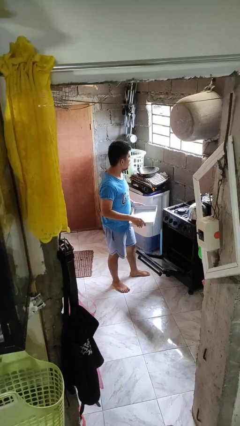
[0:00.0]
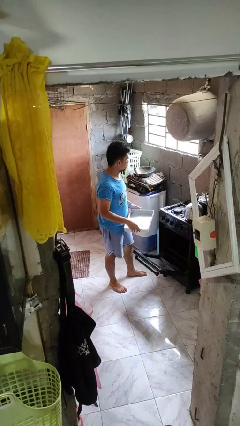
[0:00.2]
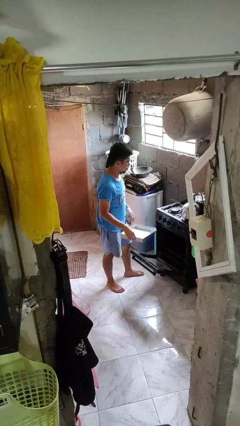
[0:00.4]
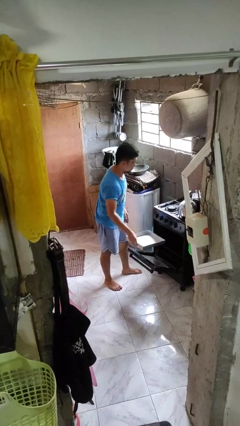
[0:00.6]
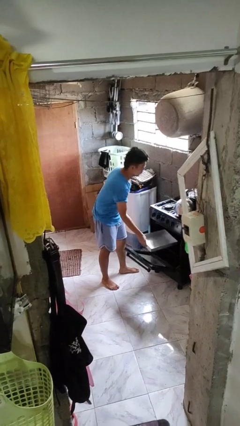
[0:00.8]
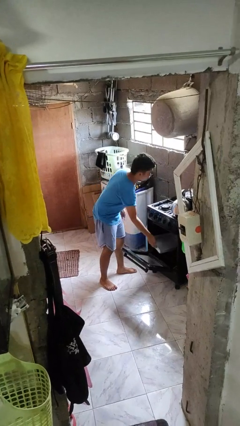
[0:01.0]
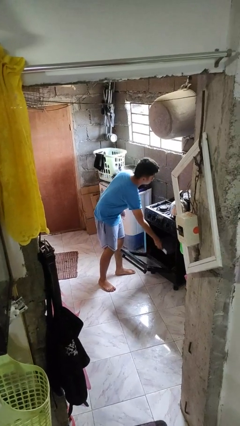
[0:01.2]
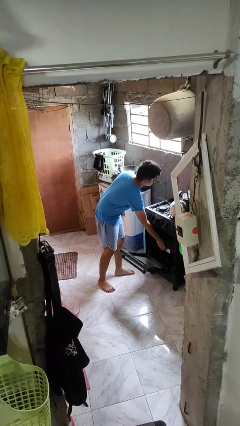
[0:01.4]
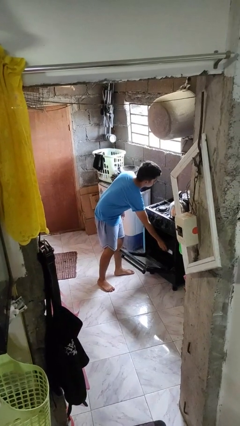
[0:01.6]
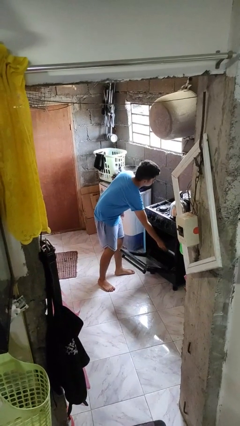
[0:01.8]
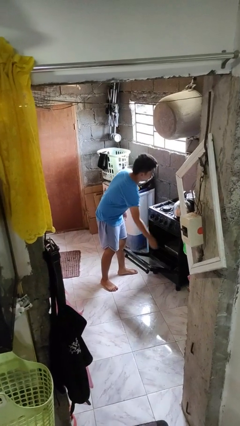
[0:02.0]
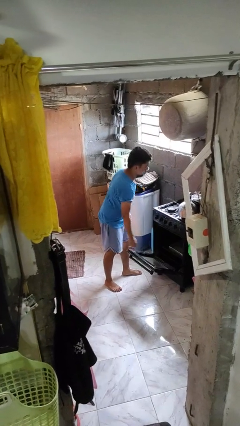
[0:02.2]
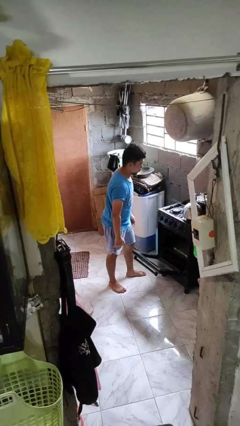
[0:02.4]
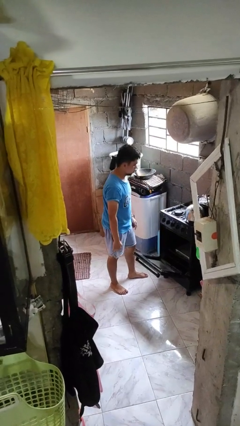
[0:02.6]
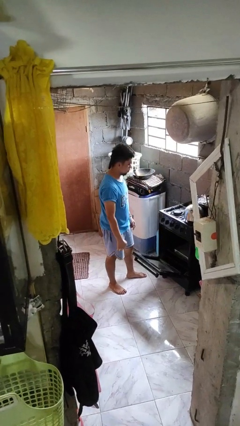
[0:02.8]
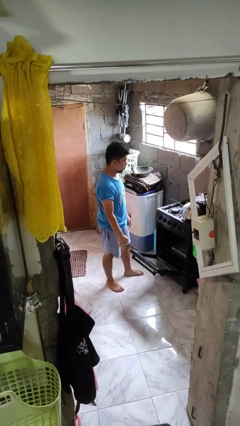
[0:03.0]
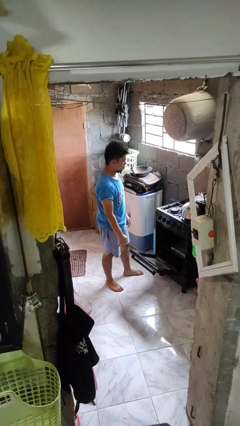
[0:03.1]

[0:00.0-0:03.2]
person puts object into oven

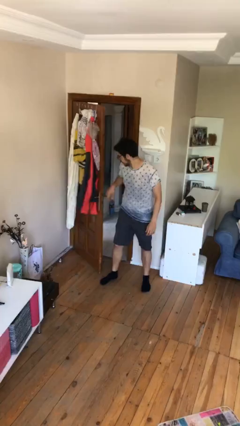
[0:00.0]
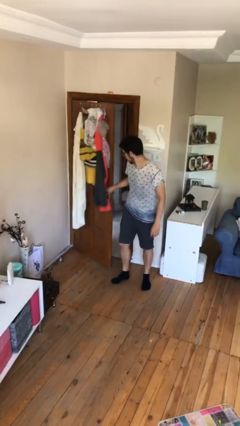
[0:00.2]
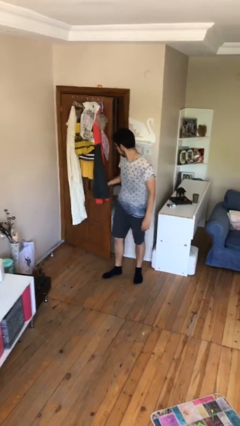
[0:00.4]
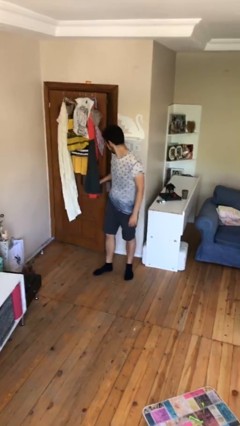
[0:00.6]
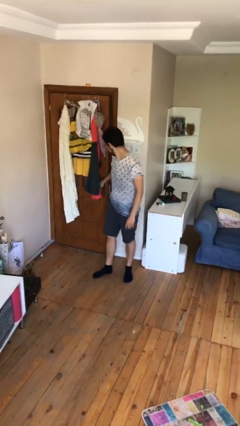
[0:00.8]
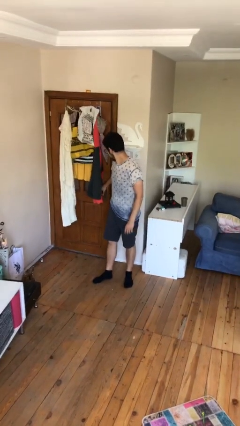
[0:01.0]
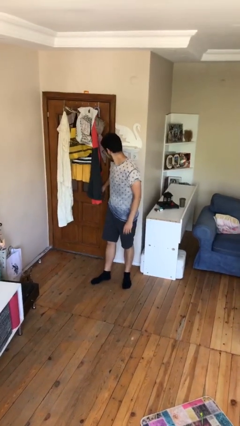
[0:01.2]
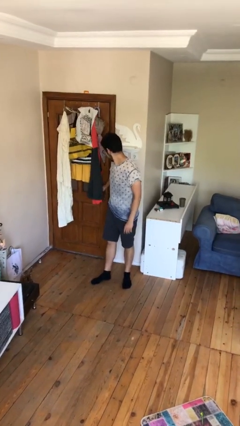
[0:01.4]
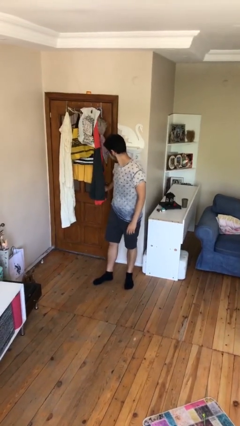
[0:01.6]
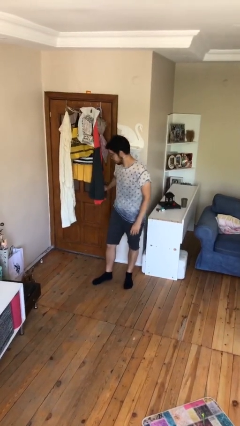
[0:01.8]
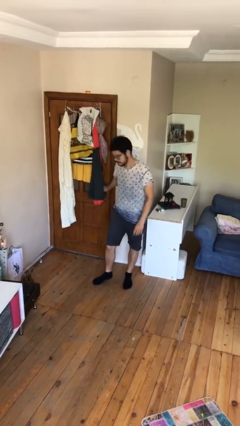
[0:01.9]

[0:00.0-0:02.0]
person closes facility door

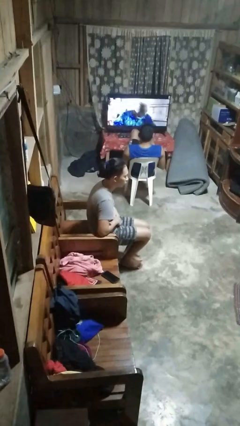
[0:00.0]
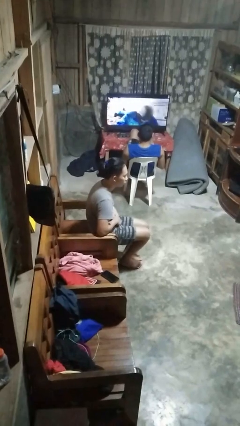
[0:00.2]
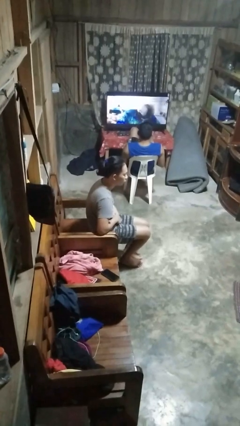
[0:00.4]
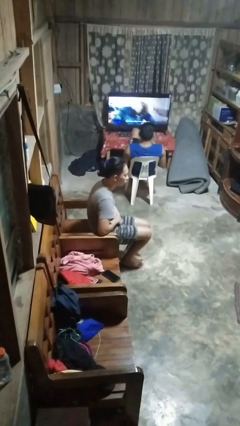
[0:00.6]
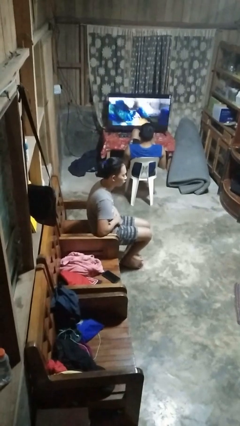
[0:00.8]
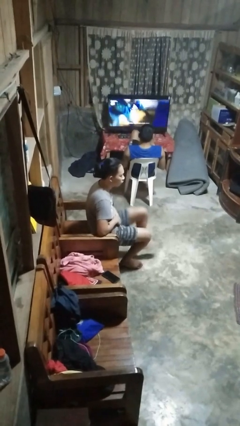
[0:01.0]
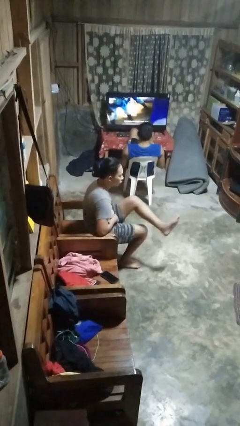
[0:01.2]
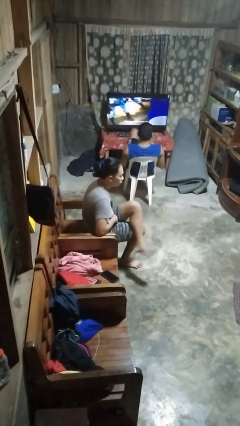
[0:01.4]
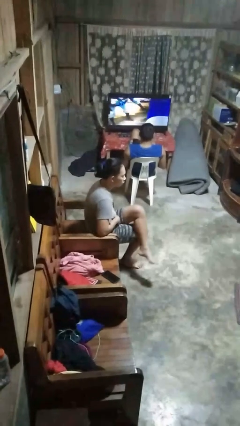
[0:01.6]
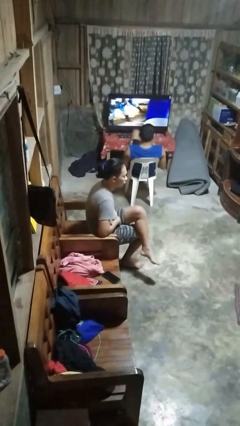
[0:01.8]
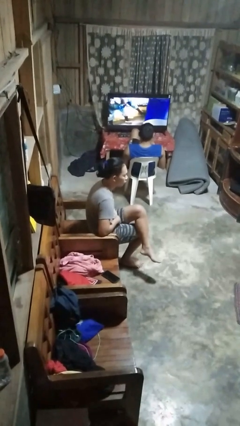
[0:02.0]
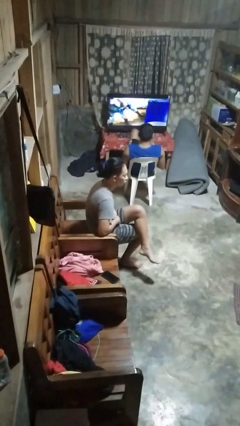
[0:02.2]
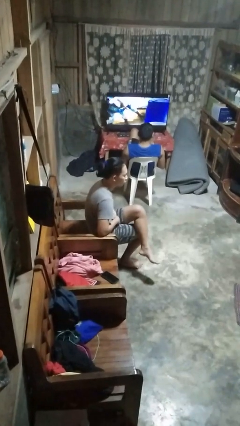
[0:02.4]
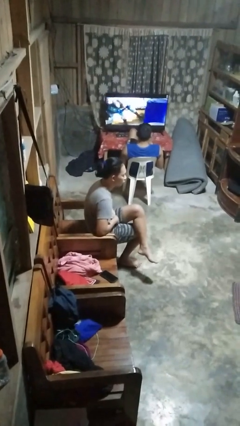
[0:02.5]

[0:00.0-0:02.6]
person crosses legs

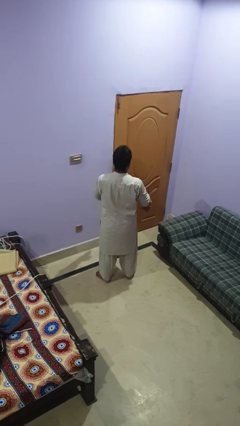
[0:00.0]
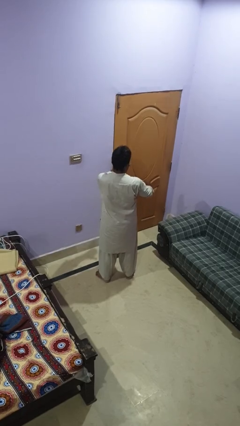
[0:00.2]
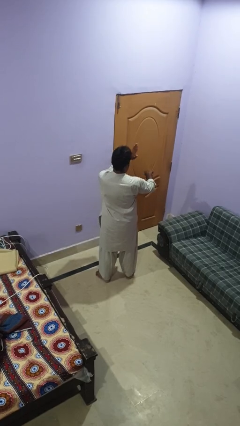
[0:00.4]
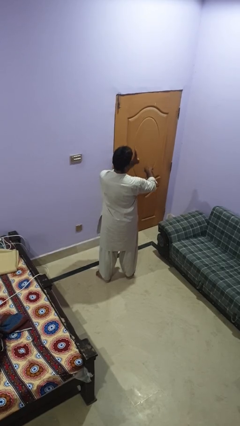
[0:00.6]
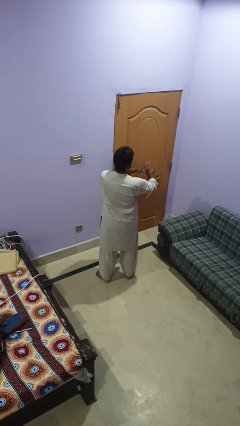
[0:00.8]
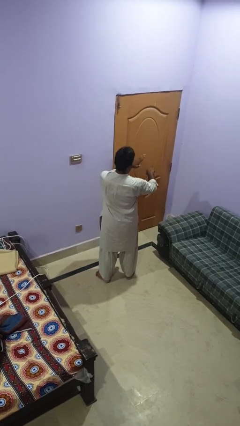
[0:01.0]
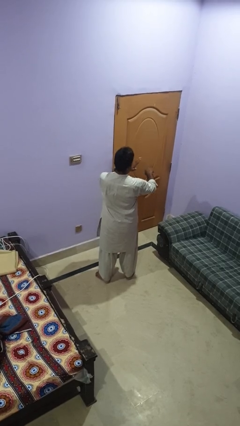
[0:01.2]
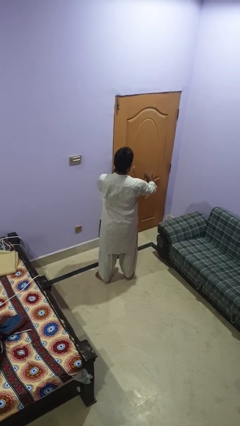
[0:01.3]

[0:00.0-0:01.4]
person swats bug

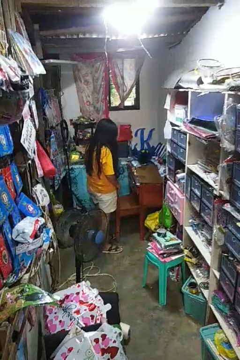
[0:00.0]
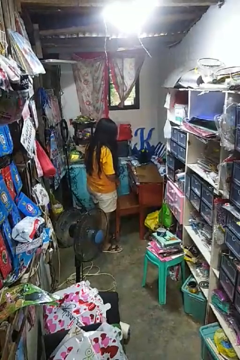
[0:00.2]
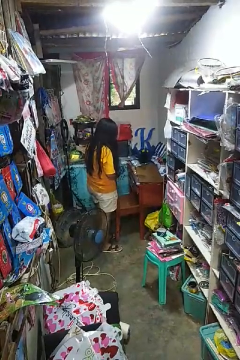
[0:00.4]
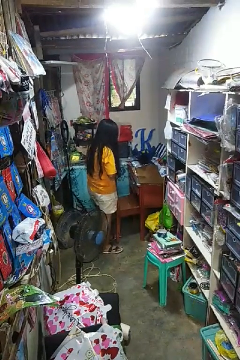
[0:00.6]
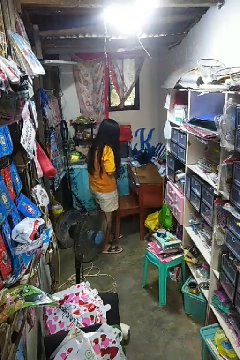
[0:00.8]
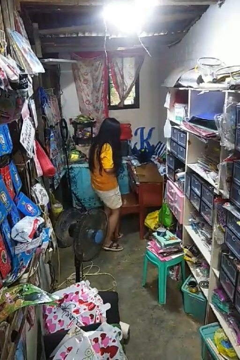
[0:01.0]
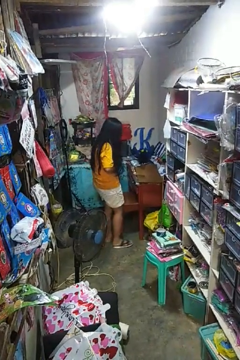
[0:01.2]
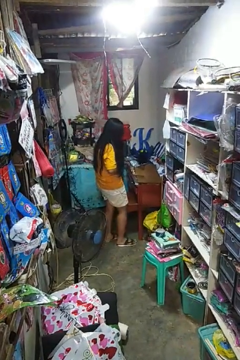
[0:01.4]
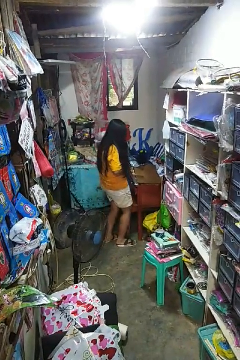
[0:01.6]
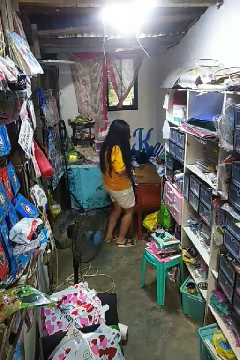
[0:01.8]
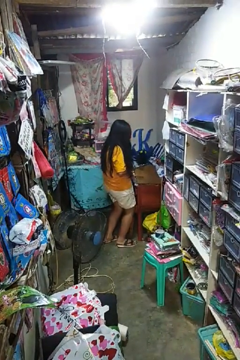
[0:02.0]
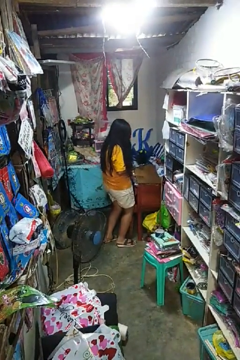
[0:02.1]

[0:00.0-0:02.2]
person pushes in chair

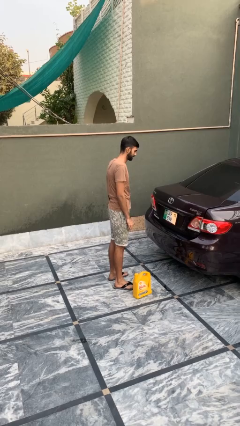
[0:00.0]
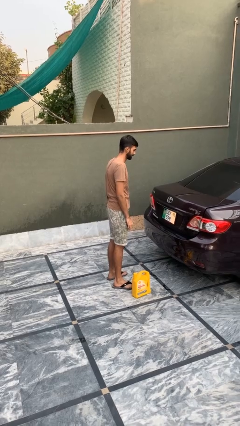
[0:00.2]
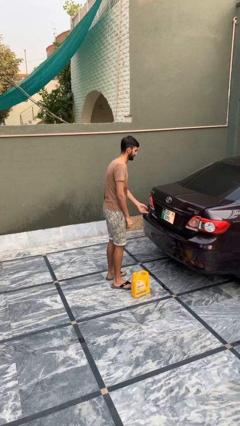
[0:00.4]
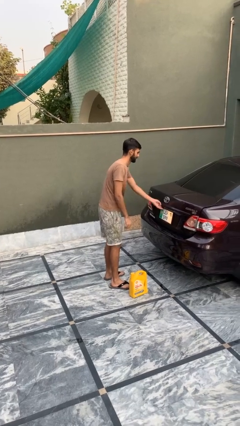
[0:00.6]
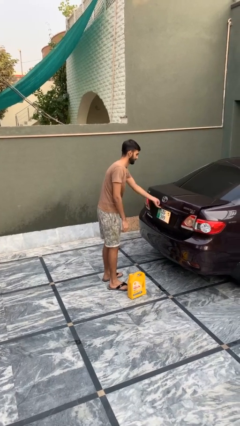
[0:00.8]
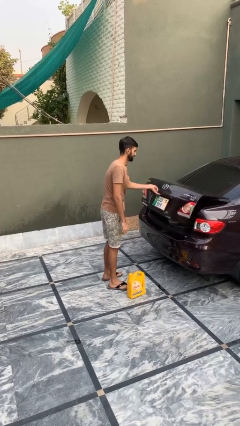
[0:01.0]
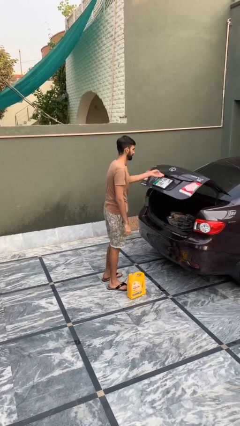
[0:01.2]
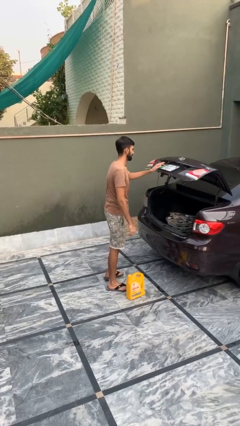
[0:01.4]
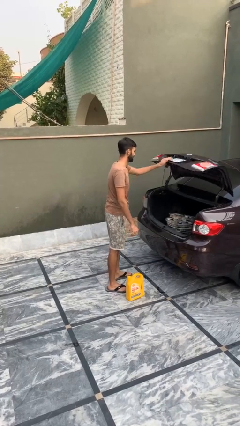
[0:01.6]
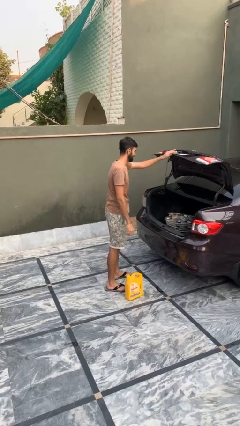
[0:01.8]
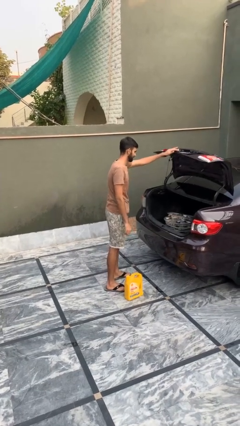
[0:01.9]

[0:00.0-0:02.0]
person opens car trunk

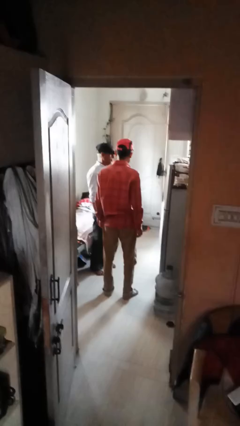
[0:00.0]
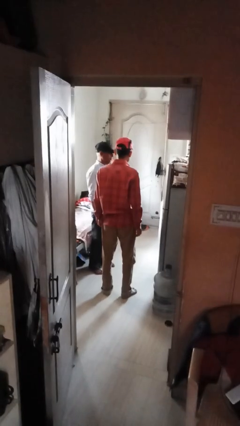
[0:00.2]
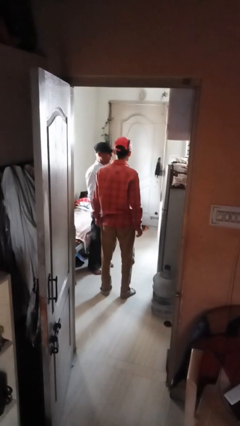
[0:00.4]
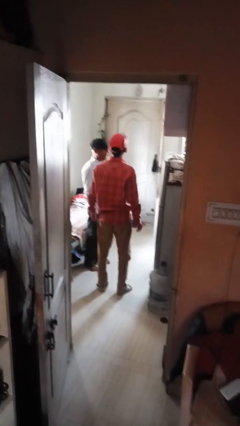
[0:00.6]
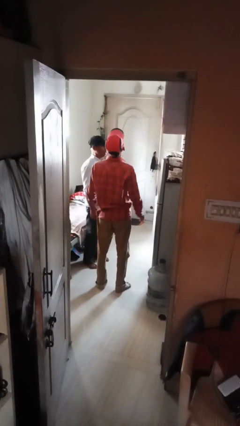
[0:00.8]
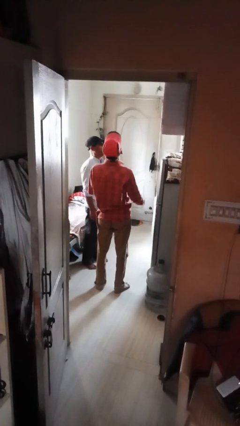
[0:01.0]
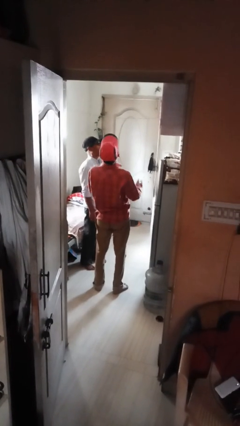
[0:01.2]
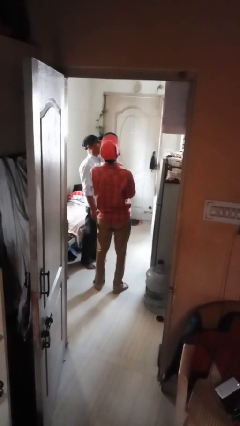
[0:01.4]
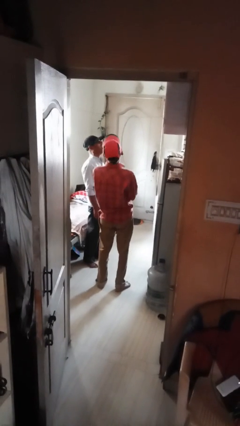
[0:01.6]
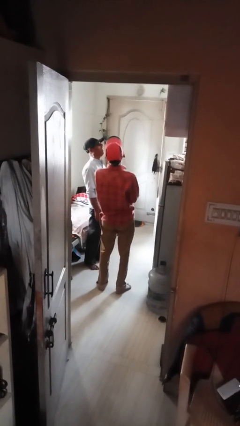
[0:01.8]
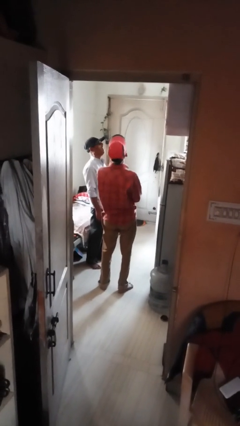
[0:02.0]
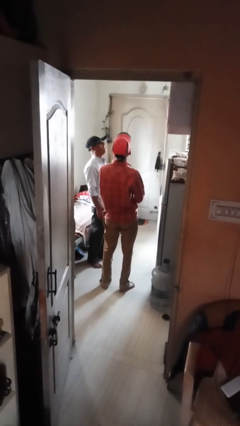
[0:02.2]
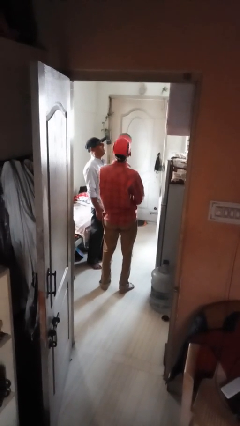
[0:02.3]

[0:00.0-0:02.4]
person laughs with person

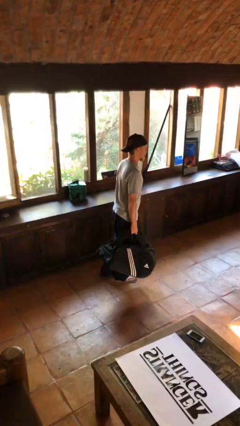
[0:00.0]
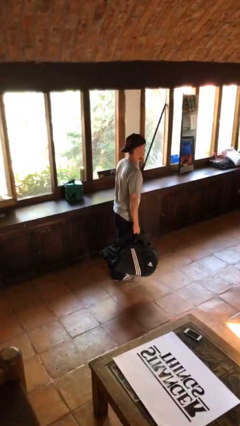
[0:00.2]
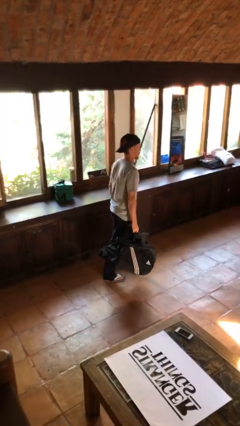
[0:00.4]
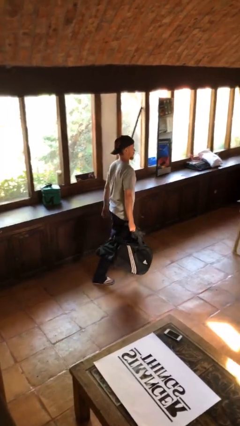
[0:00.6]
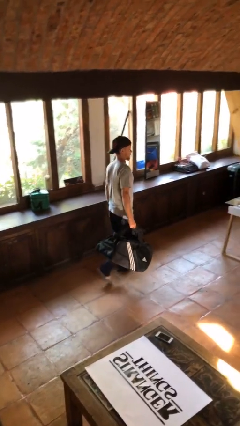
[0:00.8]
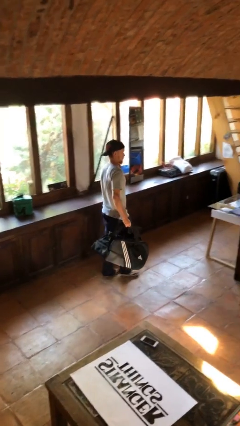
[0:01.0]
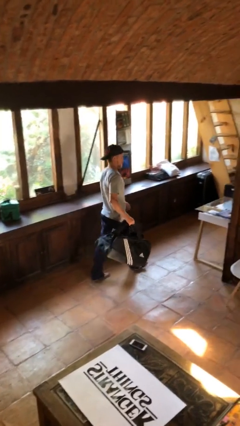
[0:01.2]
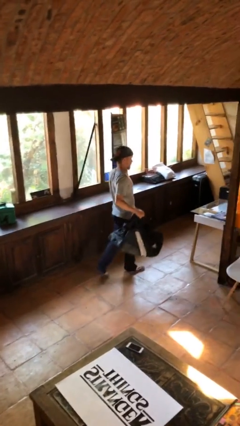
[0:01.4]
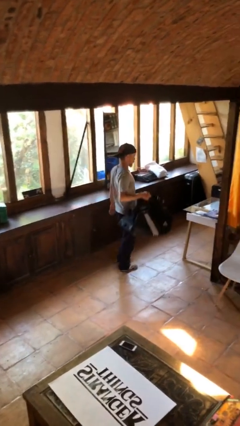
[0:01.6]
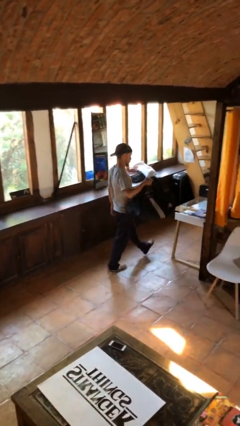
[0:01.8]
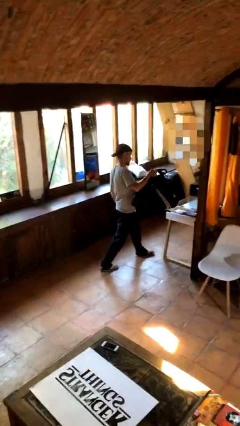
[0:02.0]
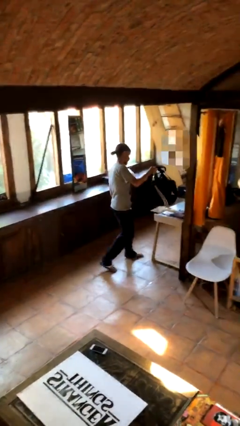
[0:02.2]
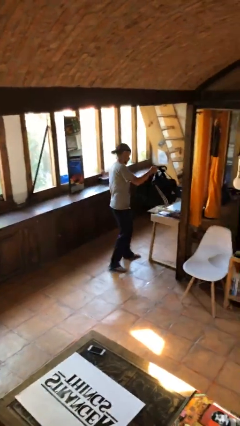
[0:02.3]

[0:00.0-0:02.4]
person puts down object on table
